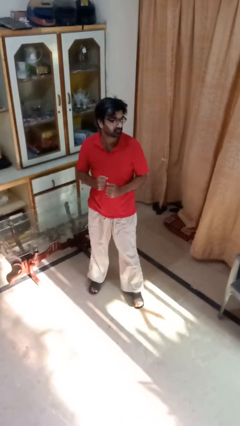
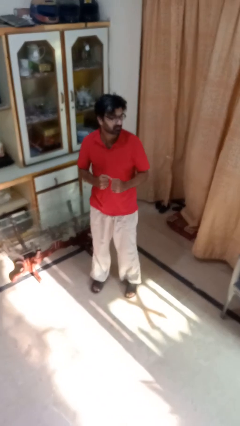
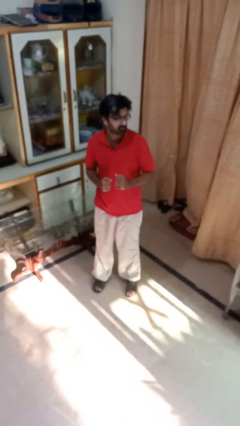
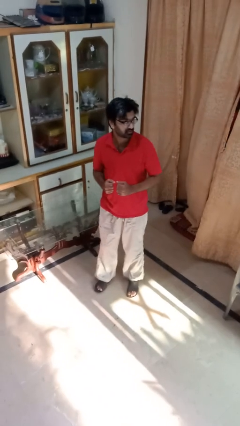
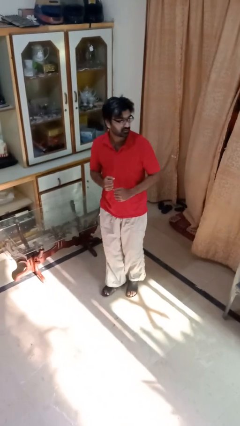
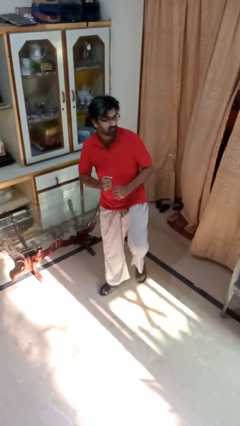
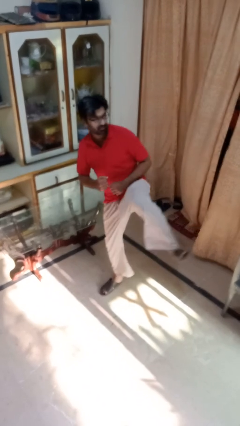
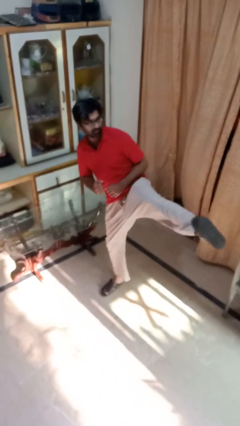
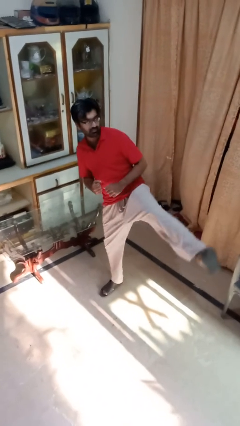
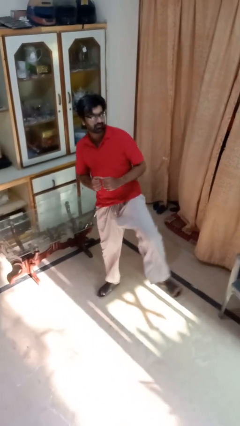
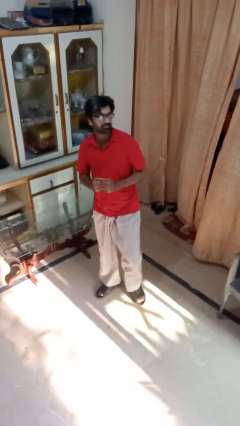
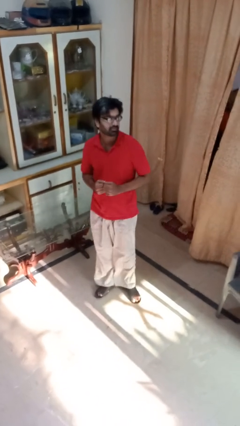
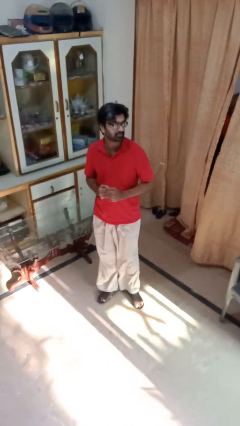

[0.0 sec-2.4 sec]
person karate kicks

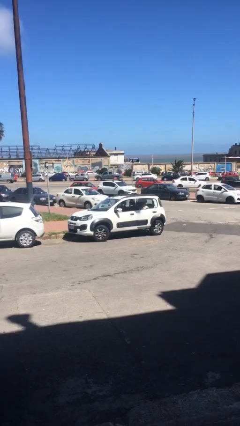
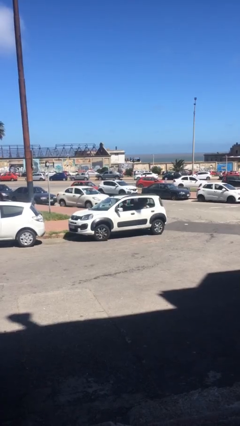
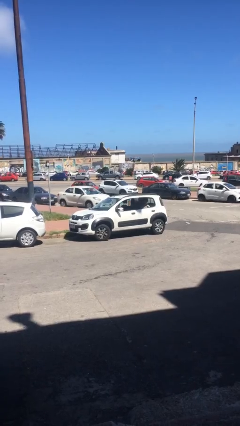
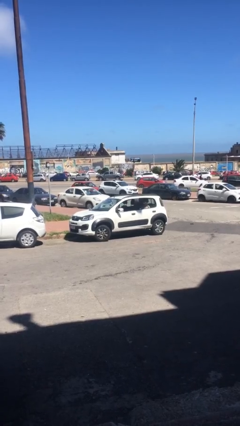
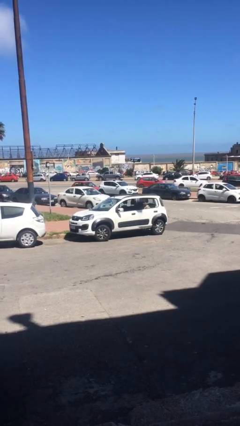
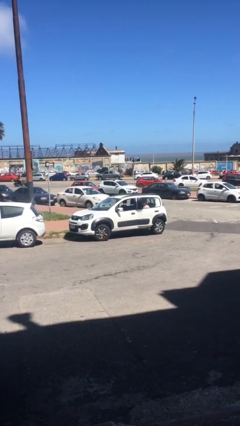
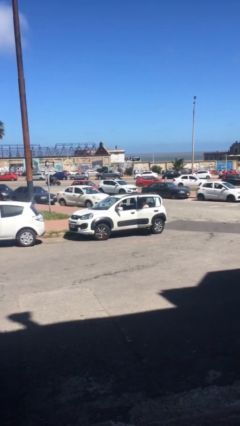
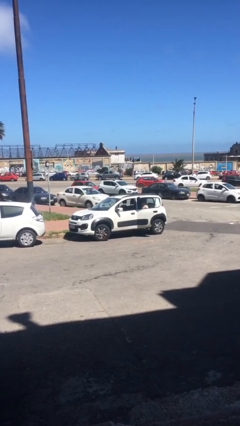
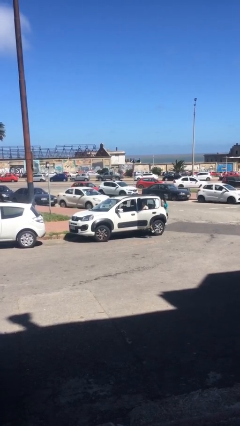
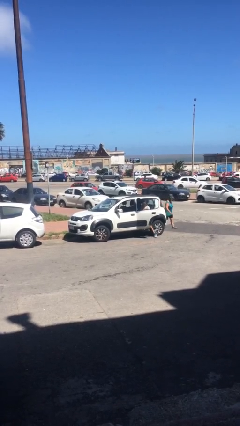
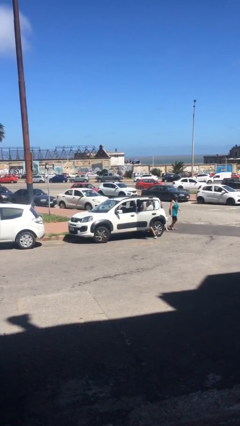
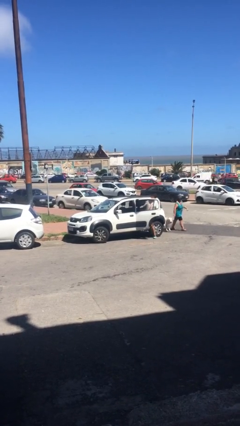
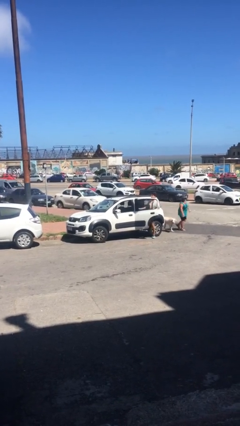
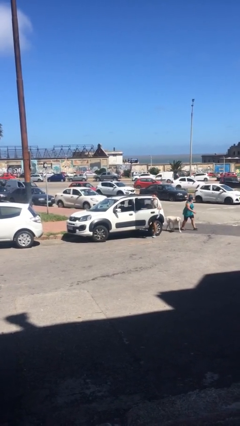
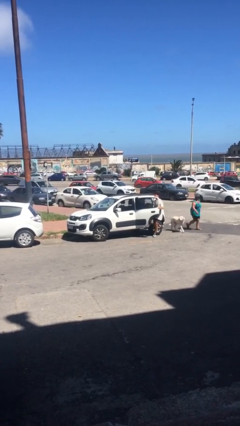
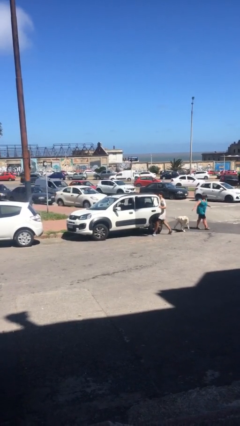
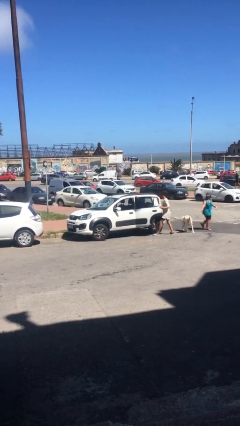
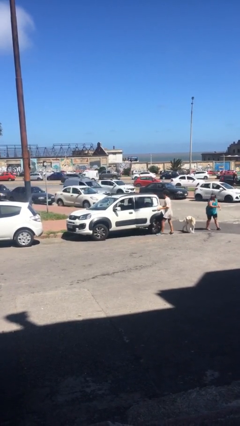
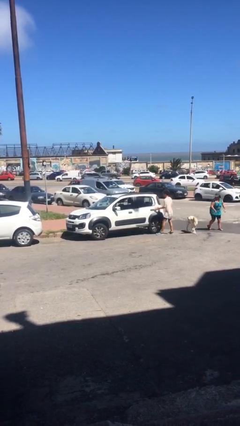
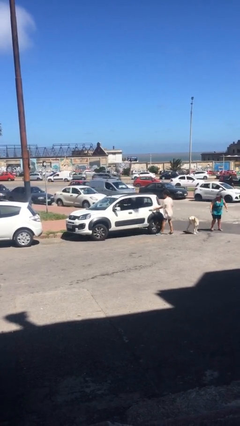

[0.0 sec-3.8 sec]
car drops off person

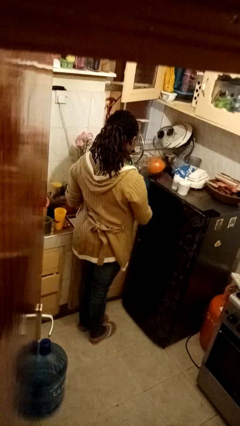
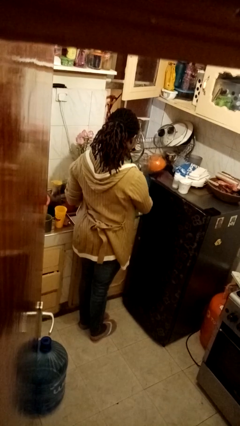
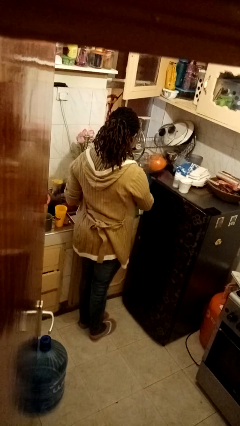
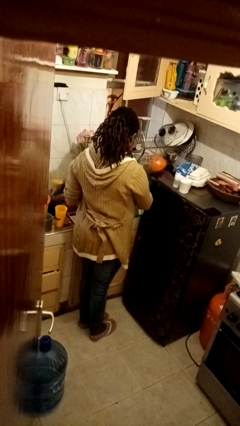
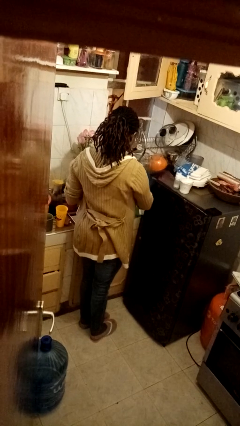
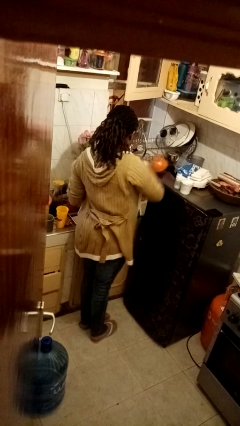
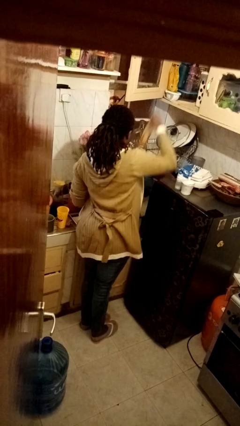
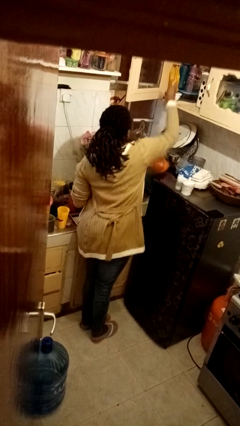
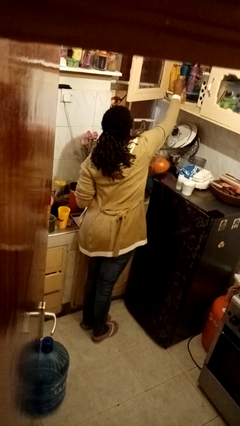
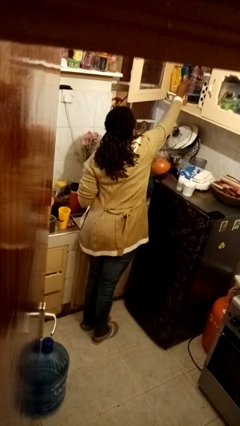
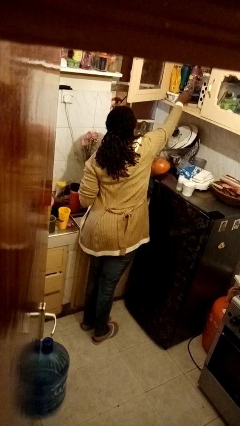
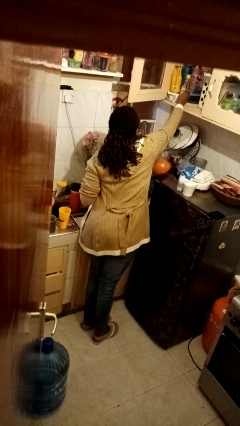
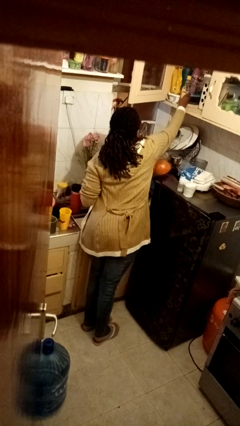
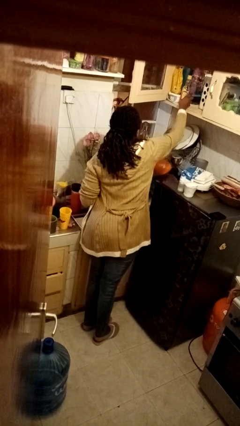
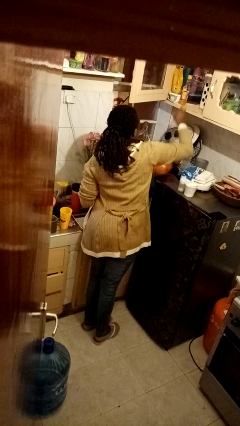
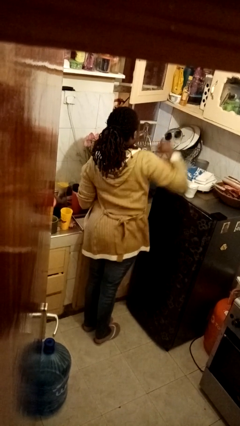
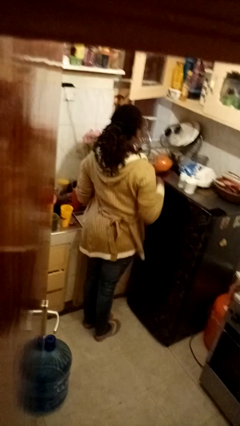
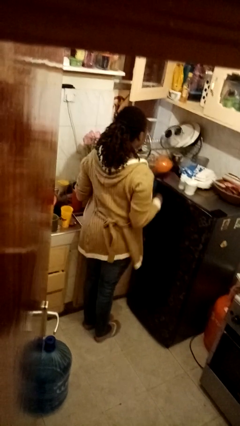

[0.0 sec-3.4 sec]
person loads groceries into cabinet

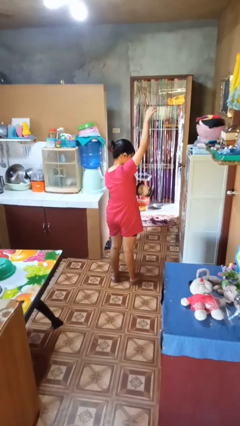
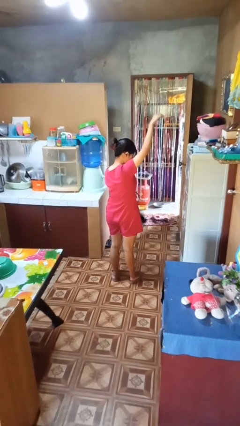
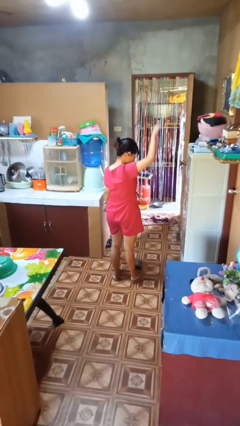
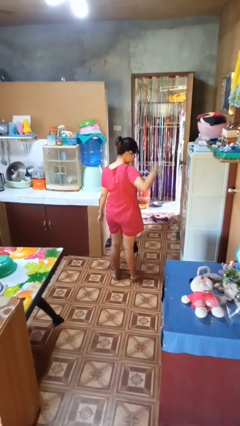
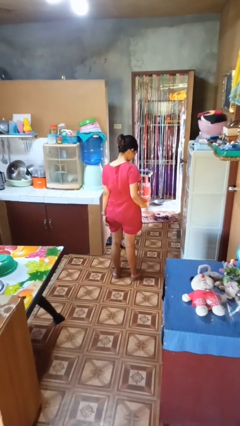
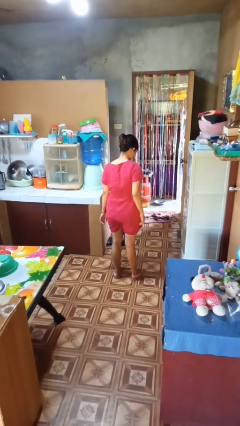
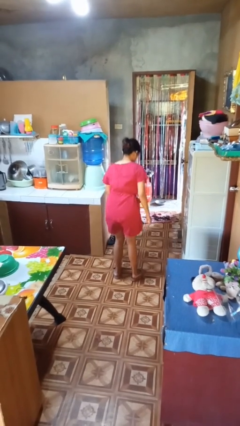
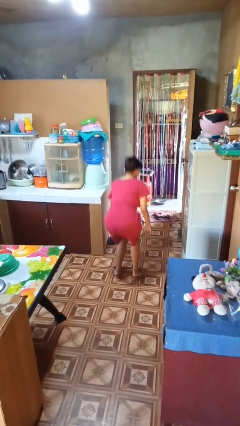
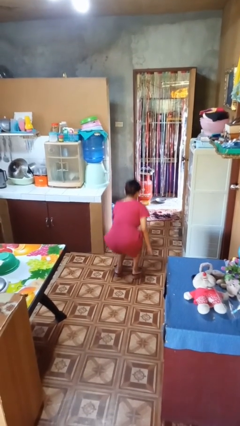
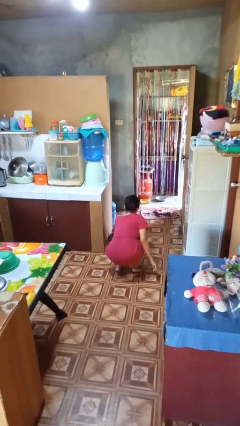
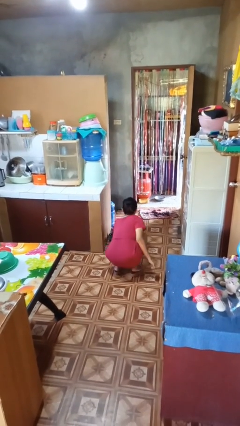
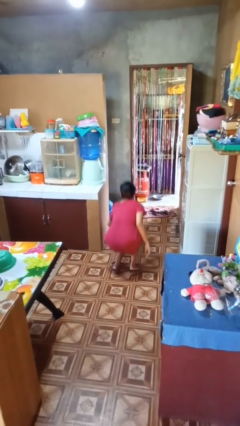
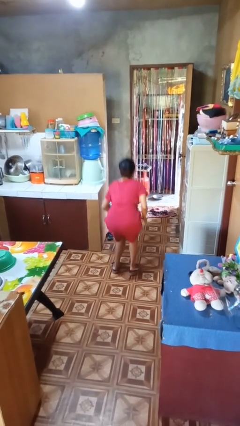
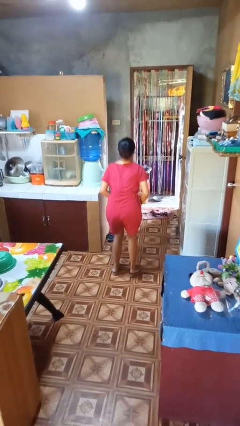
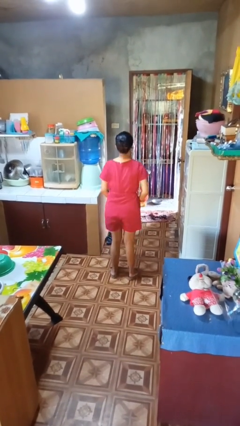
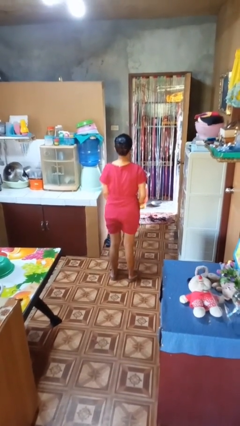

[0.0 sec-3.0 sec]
person catches dropped object

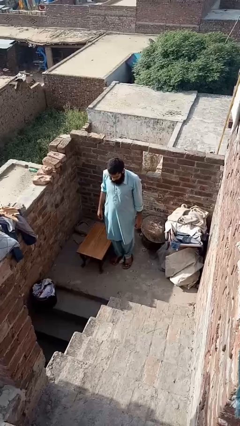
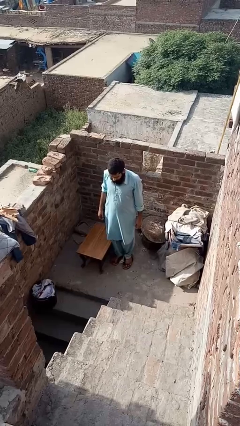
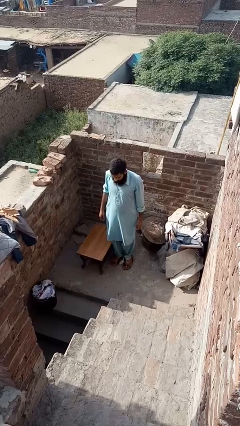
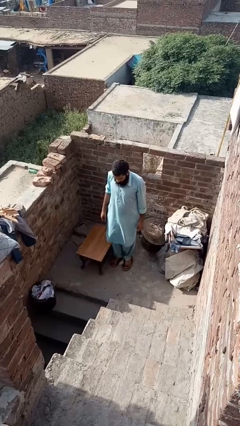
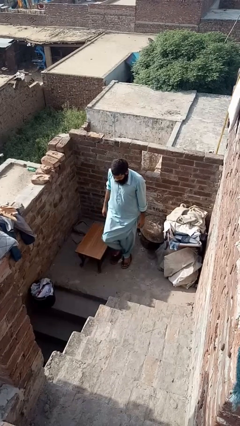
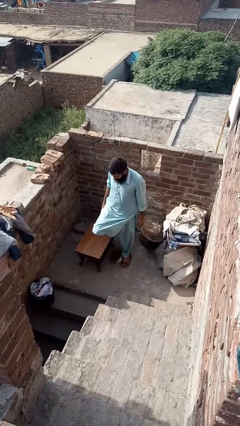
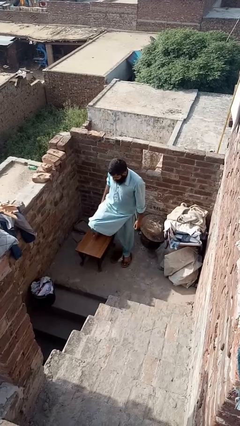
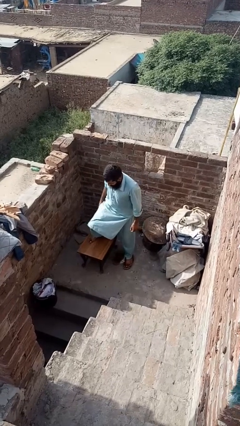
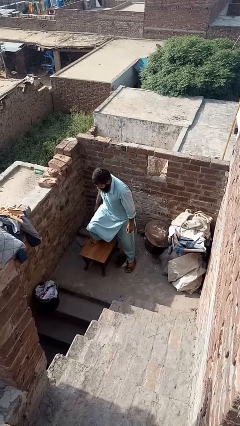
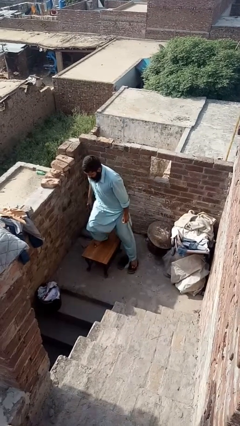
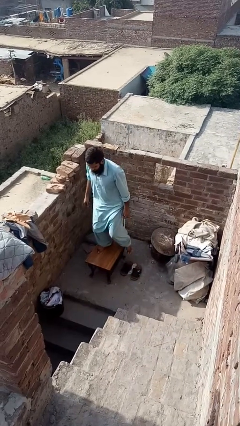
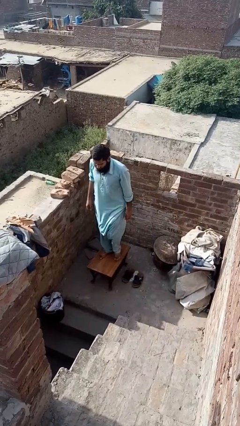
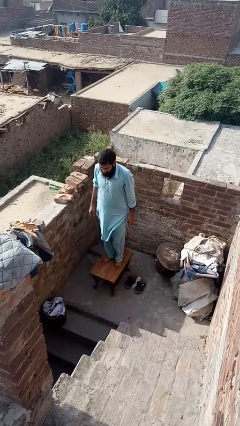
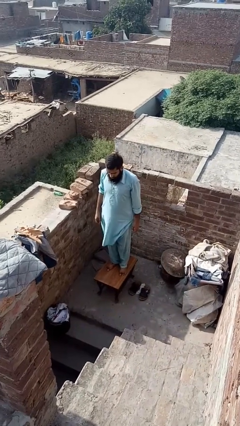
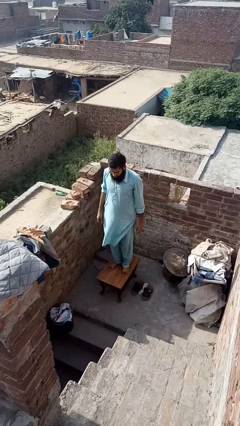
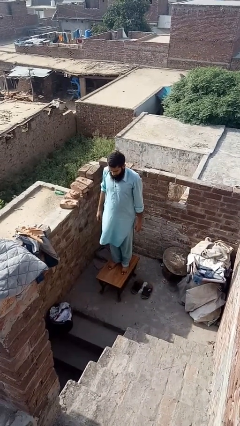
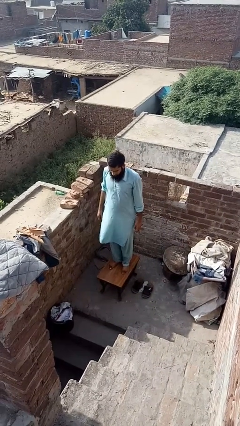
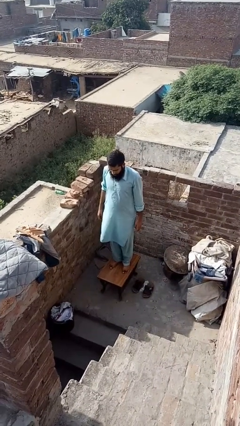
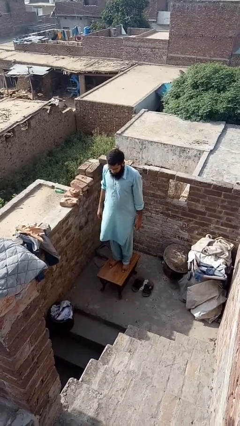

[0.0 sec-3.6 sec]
person climbs on table

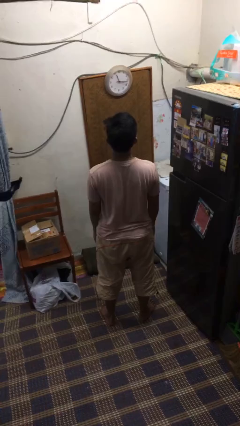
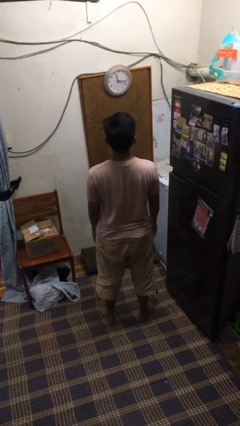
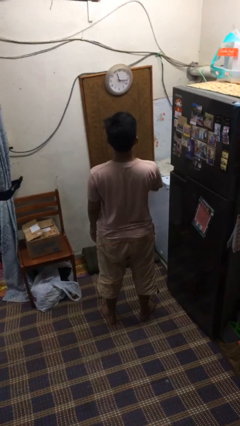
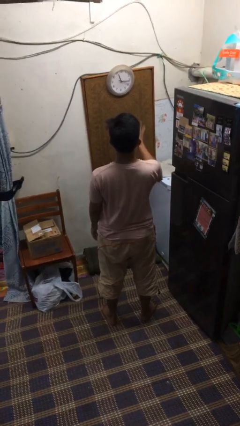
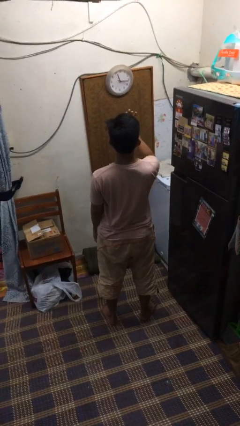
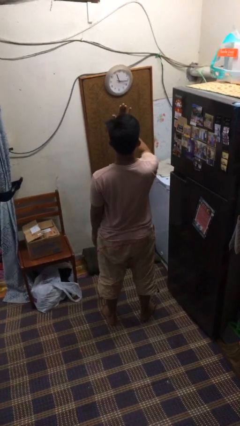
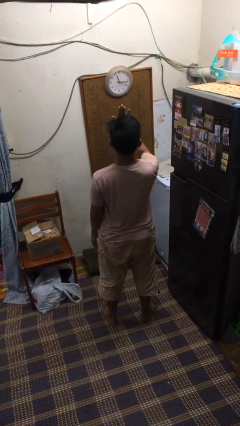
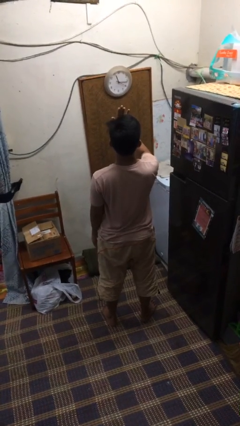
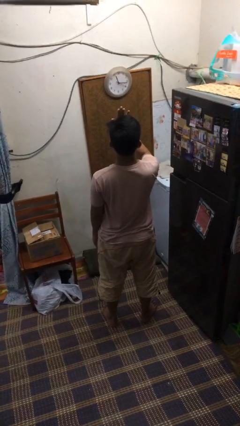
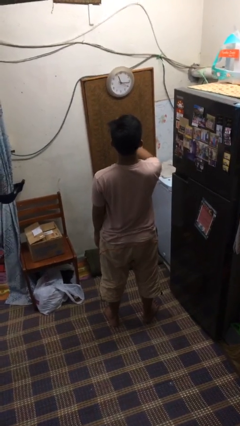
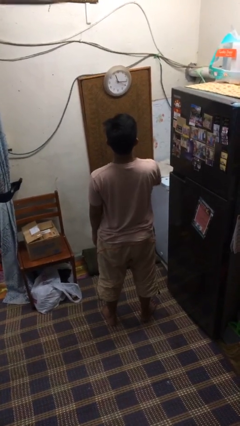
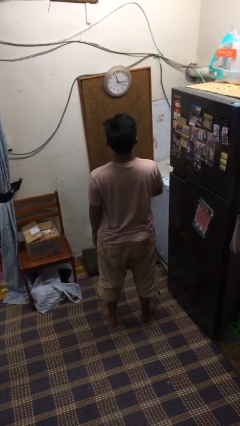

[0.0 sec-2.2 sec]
person gestures stop
